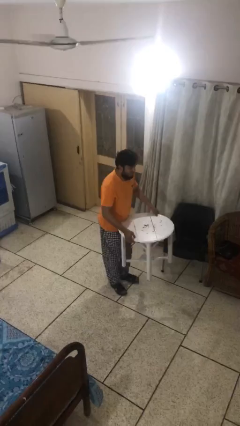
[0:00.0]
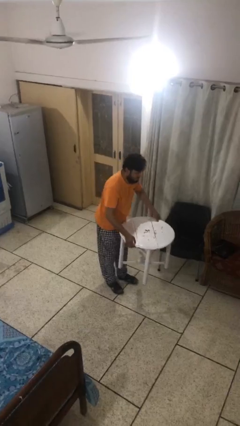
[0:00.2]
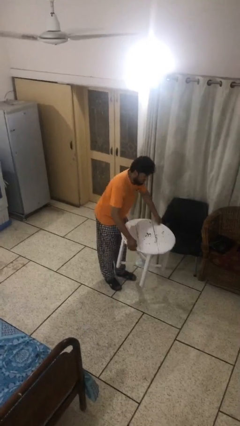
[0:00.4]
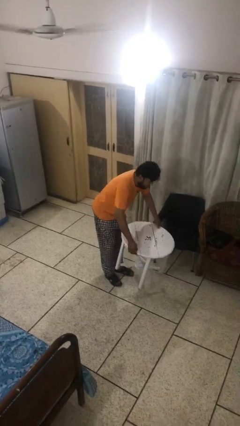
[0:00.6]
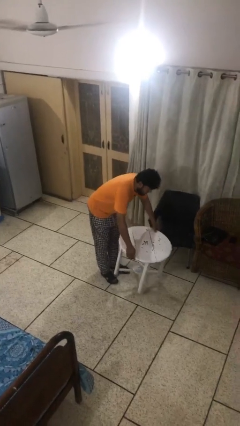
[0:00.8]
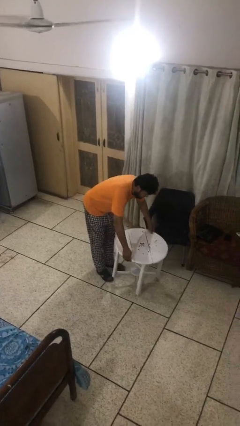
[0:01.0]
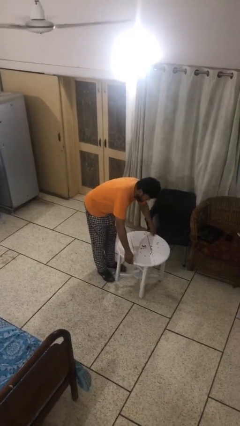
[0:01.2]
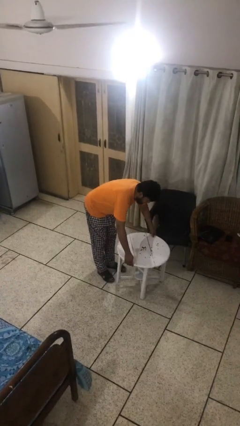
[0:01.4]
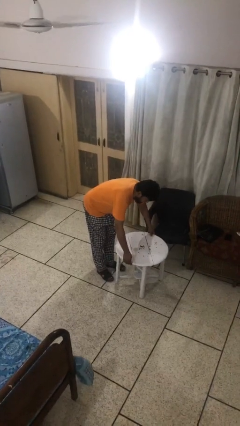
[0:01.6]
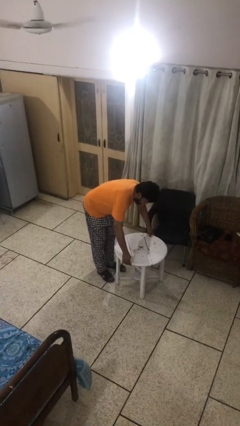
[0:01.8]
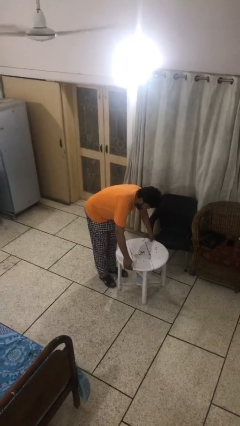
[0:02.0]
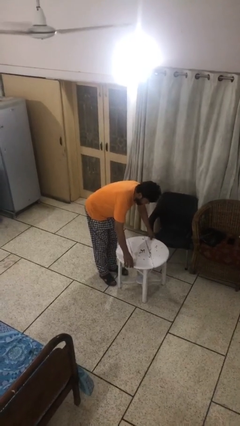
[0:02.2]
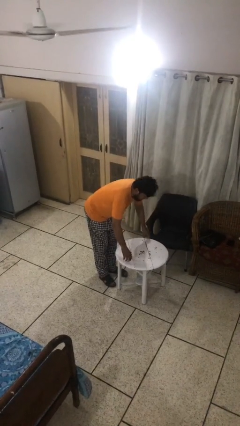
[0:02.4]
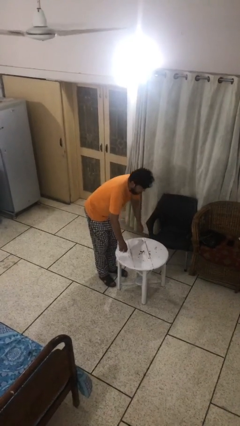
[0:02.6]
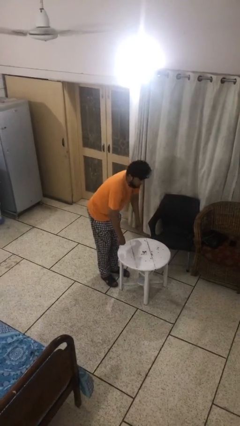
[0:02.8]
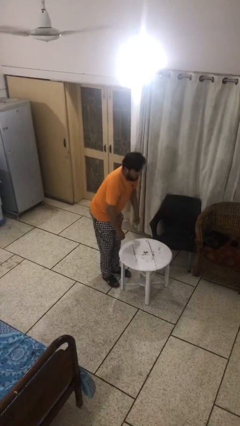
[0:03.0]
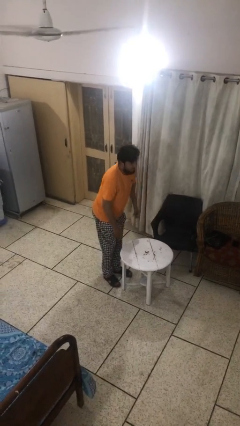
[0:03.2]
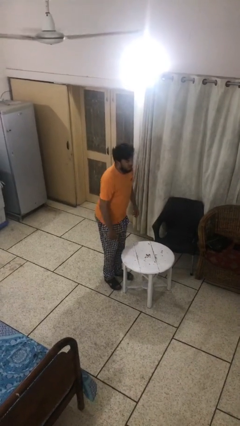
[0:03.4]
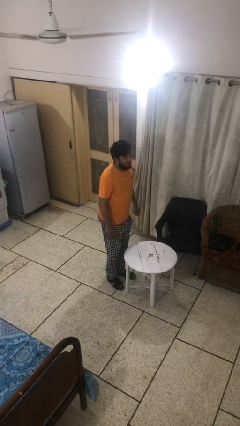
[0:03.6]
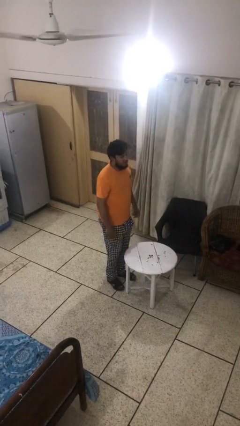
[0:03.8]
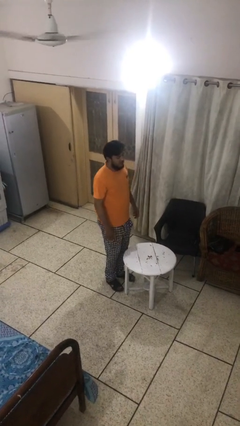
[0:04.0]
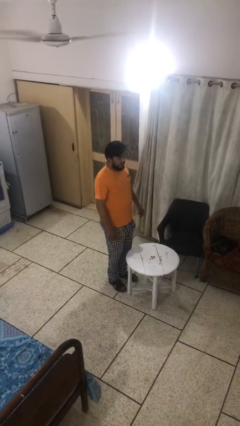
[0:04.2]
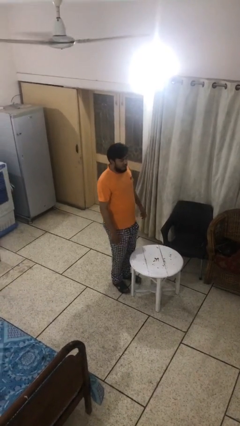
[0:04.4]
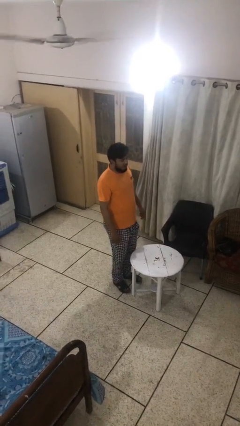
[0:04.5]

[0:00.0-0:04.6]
person puts down object on floor

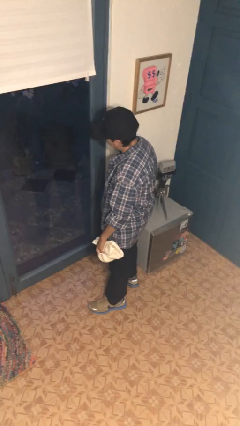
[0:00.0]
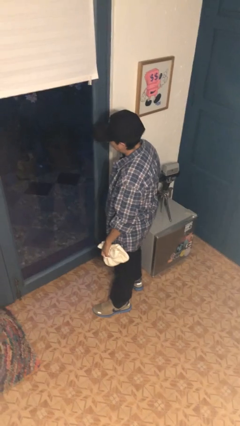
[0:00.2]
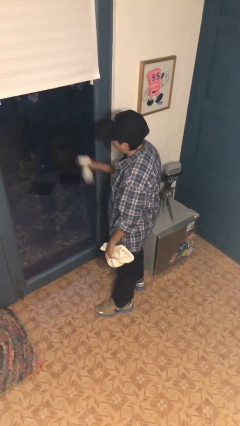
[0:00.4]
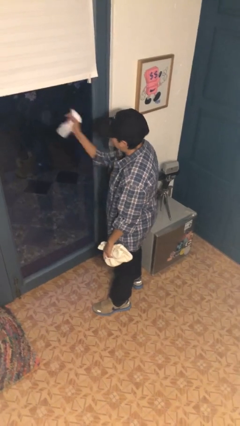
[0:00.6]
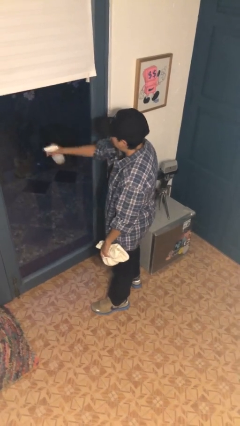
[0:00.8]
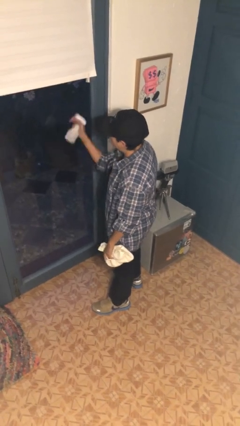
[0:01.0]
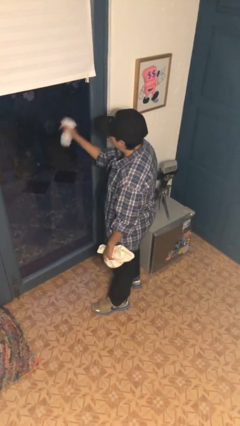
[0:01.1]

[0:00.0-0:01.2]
person sprays from bottle

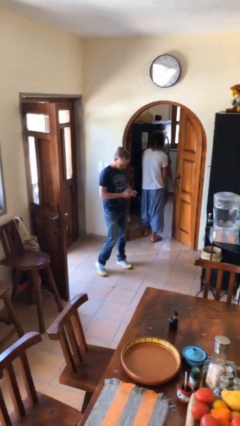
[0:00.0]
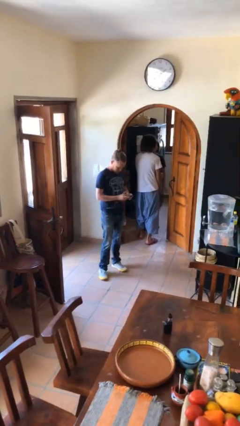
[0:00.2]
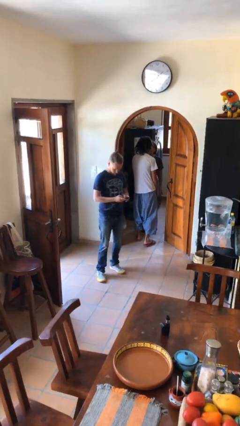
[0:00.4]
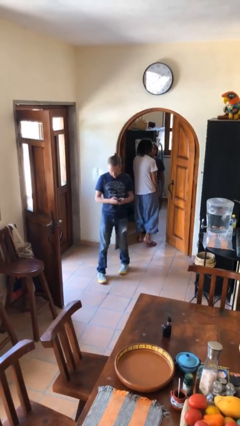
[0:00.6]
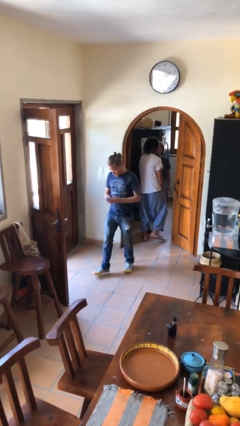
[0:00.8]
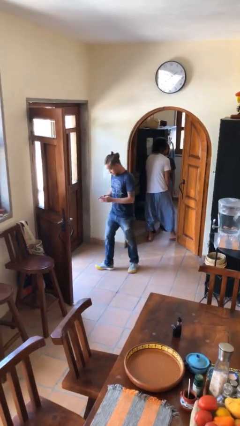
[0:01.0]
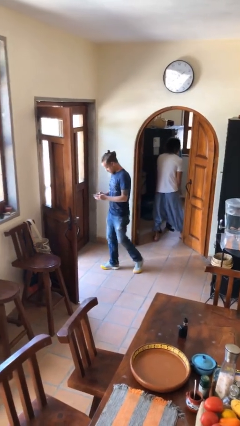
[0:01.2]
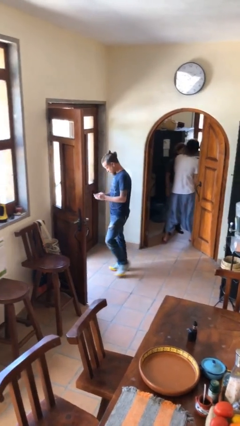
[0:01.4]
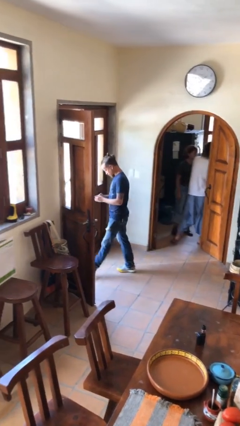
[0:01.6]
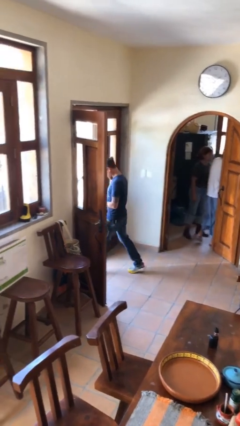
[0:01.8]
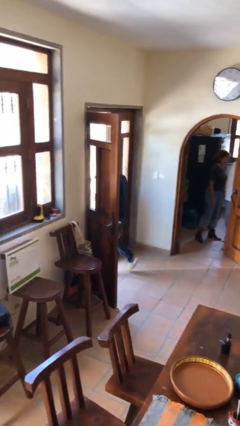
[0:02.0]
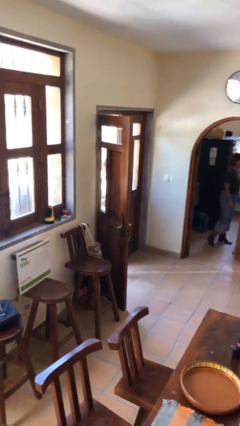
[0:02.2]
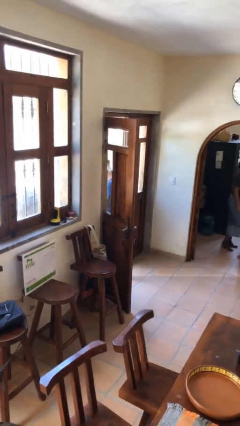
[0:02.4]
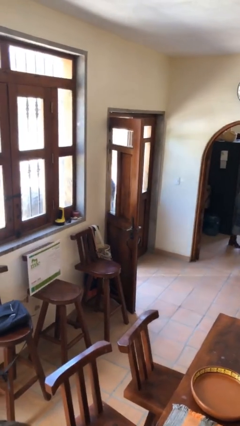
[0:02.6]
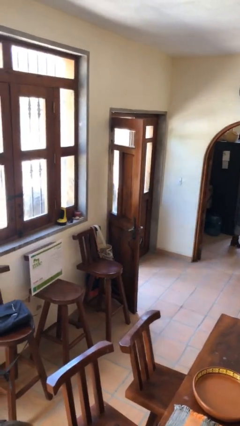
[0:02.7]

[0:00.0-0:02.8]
person exits scene through structure

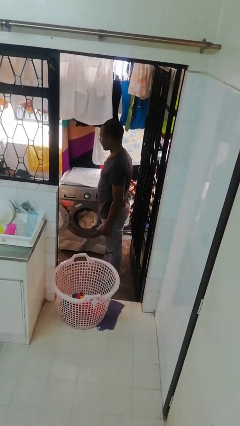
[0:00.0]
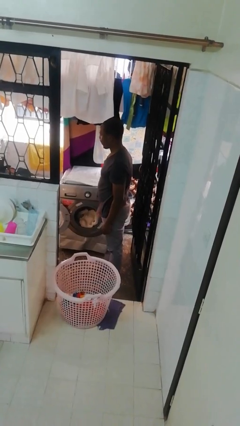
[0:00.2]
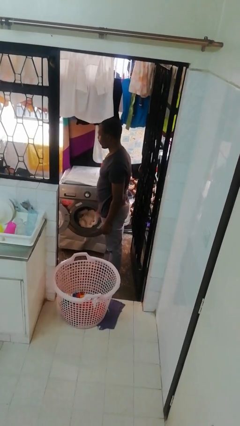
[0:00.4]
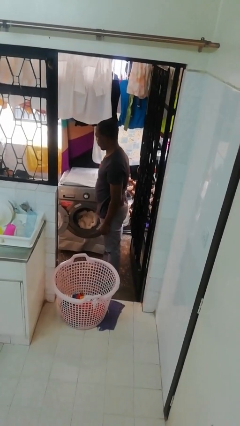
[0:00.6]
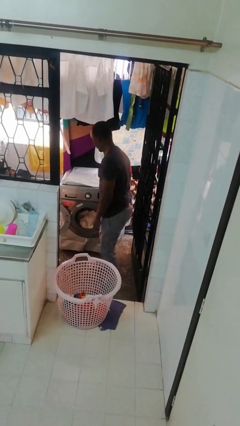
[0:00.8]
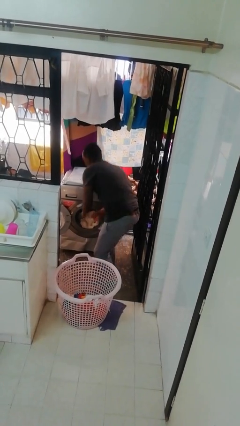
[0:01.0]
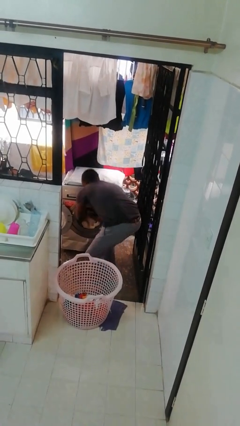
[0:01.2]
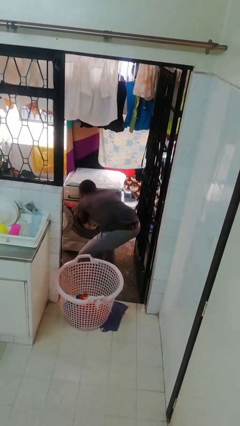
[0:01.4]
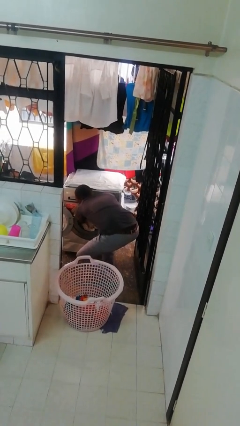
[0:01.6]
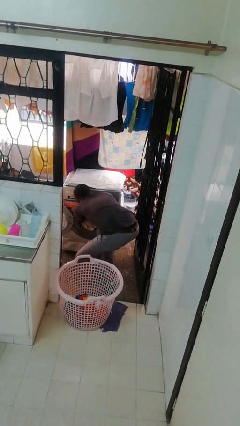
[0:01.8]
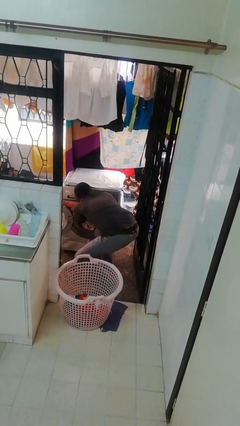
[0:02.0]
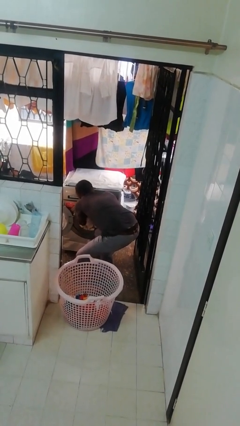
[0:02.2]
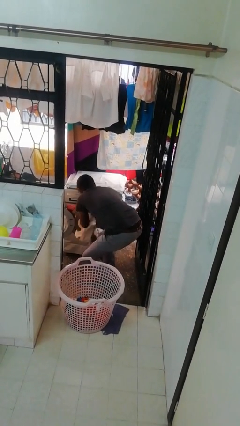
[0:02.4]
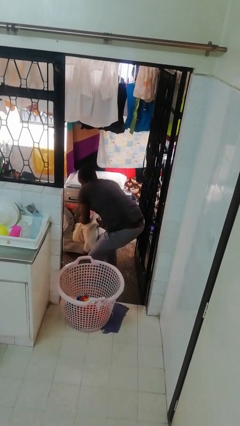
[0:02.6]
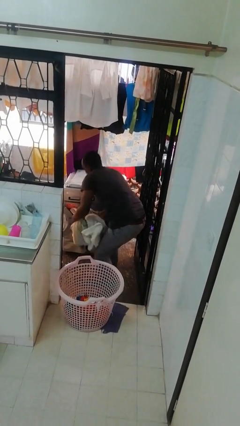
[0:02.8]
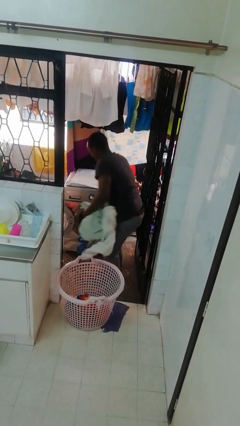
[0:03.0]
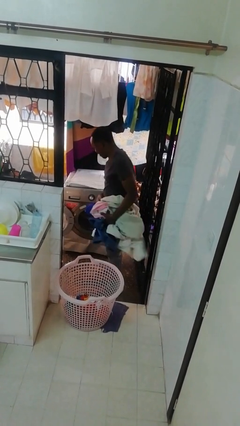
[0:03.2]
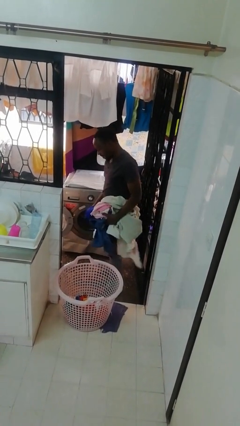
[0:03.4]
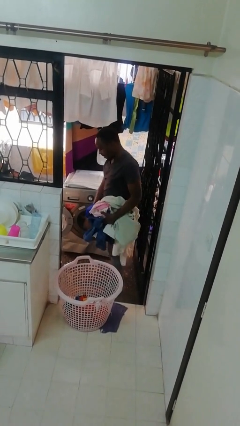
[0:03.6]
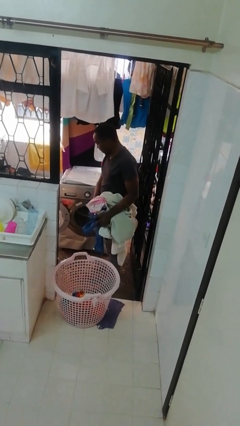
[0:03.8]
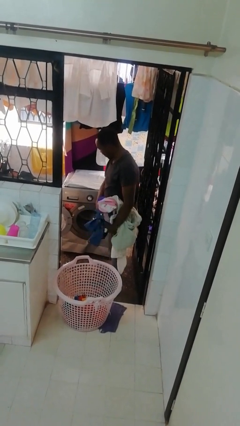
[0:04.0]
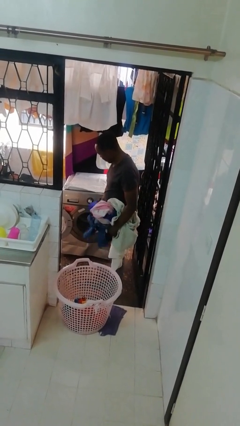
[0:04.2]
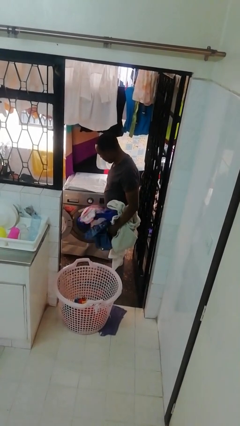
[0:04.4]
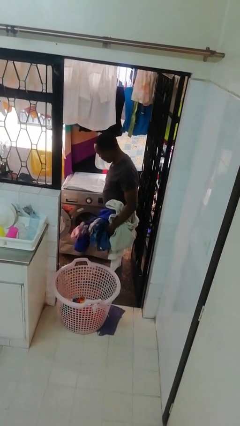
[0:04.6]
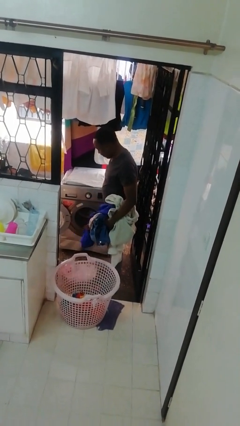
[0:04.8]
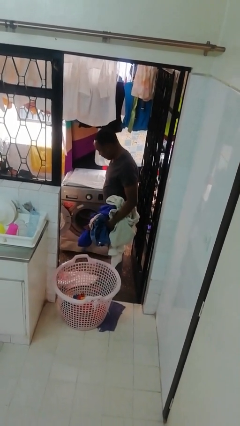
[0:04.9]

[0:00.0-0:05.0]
person unloads clotheswasher

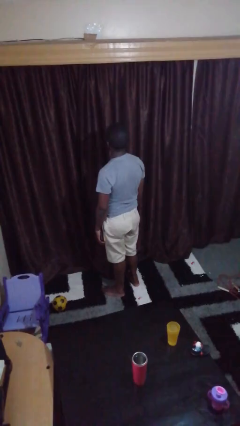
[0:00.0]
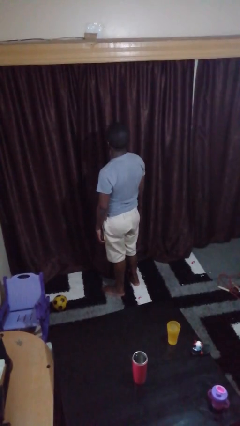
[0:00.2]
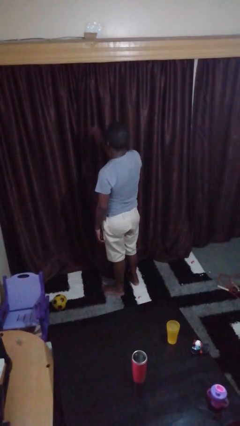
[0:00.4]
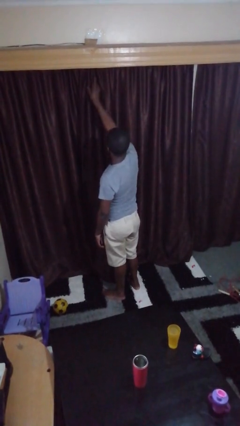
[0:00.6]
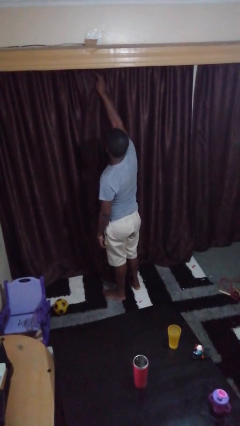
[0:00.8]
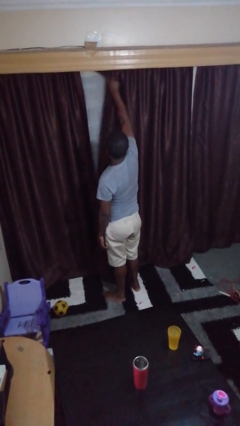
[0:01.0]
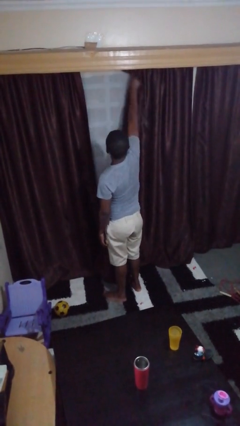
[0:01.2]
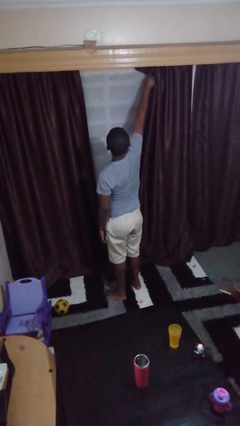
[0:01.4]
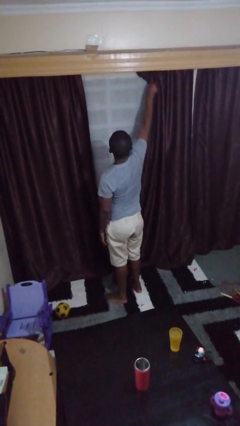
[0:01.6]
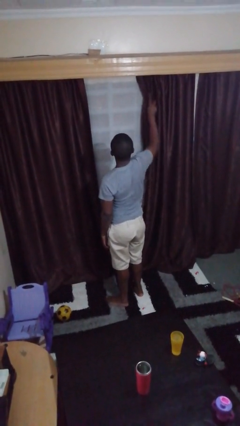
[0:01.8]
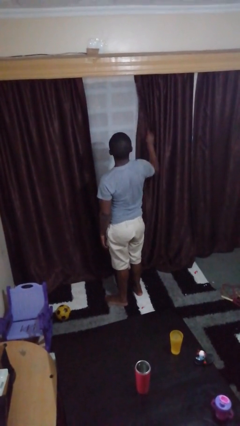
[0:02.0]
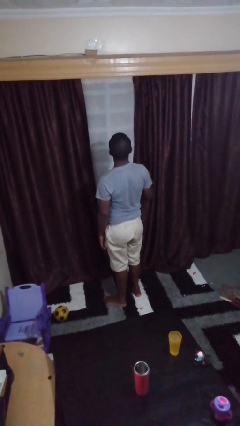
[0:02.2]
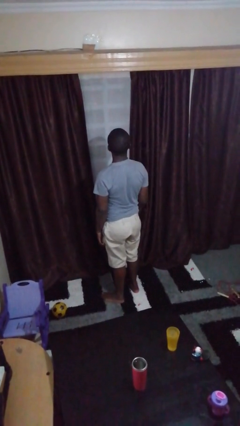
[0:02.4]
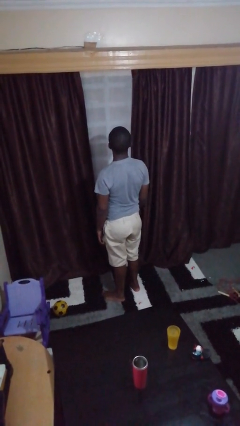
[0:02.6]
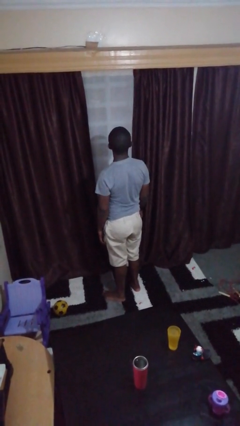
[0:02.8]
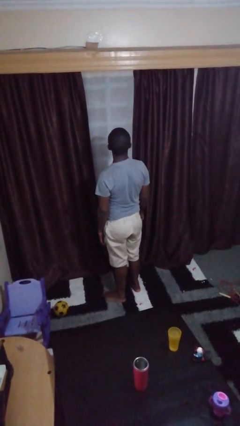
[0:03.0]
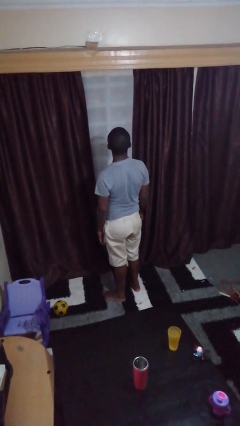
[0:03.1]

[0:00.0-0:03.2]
person opens curtains

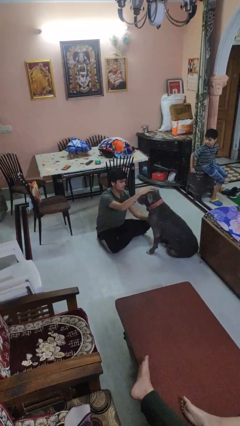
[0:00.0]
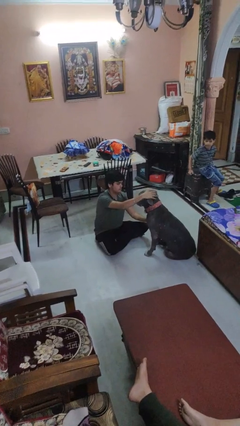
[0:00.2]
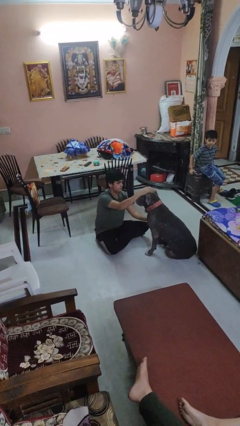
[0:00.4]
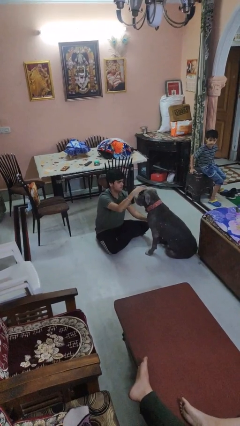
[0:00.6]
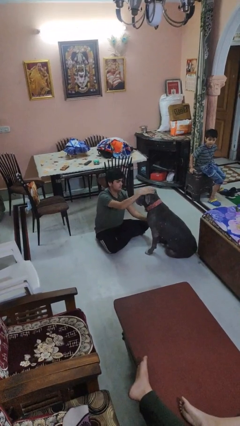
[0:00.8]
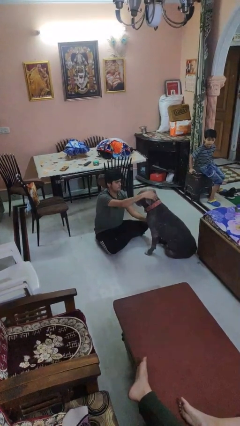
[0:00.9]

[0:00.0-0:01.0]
person pets dog
